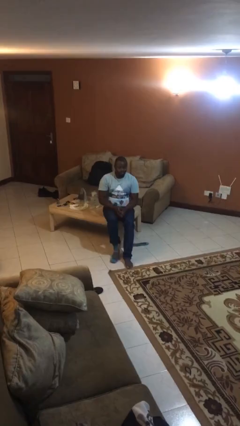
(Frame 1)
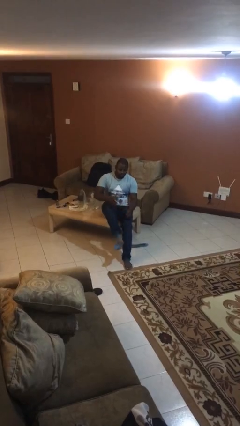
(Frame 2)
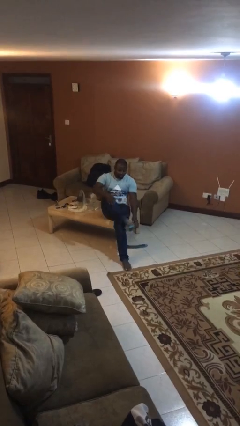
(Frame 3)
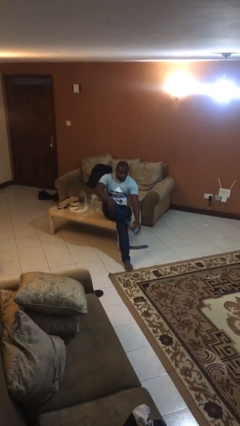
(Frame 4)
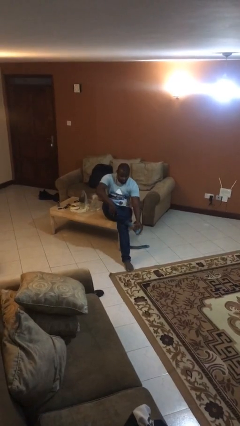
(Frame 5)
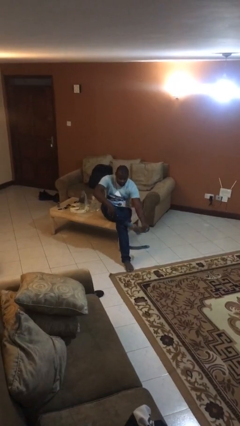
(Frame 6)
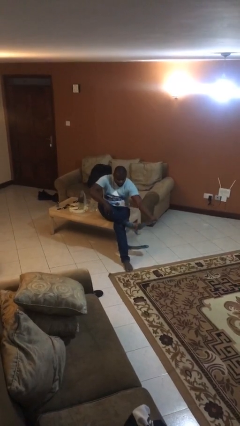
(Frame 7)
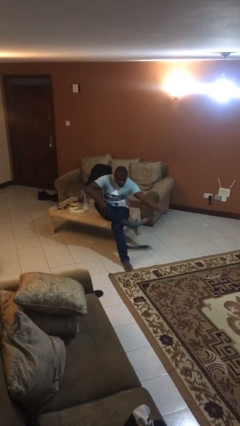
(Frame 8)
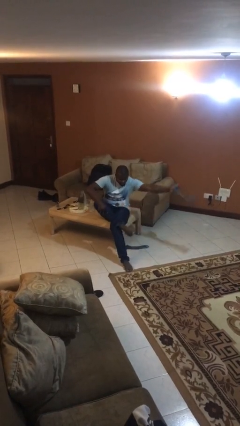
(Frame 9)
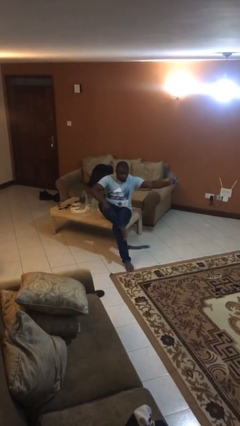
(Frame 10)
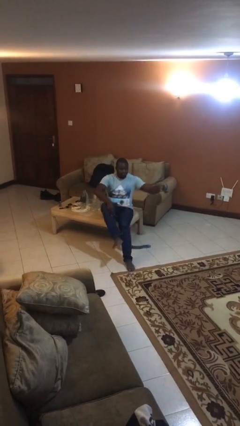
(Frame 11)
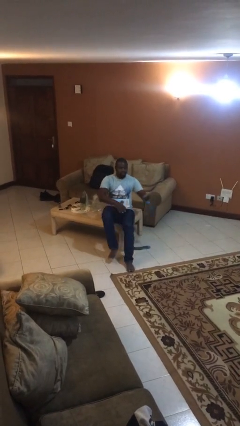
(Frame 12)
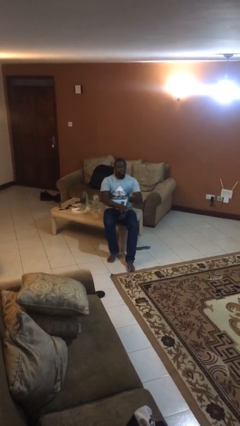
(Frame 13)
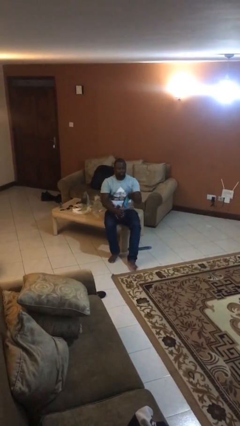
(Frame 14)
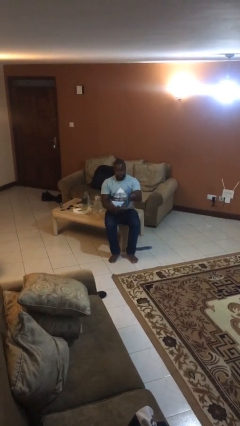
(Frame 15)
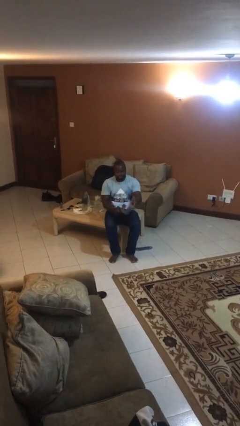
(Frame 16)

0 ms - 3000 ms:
person takes off socks

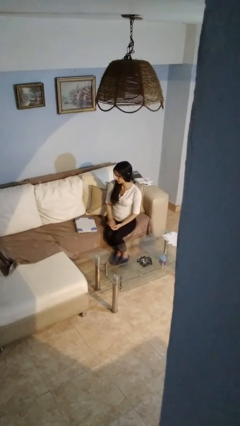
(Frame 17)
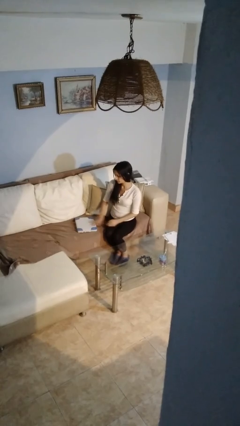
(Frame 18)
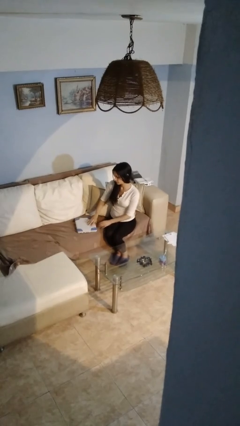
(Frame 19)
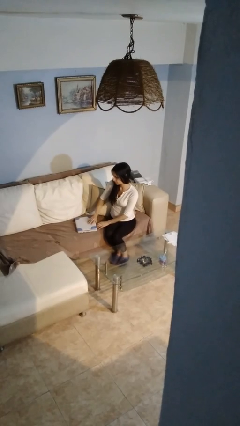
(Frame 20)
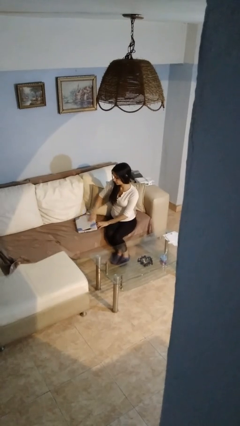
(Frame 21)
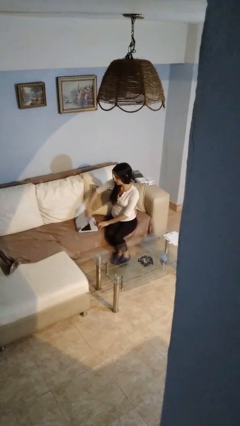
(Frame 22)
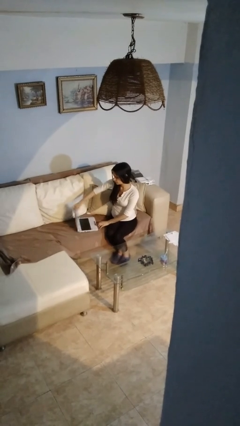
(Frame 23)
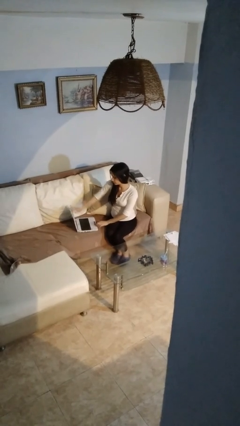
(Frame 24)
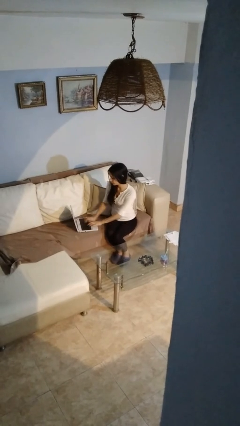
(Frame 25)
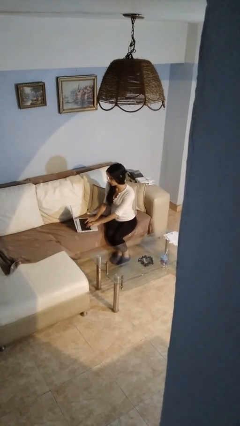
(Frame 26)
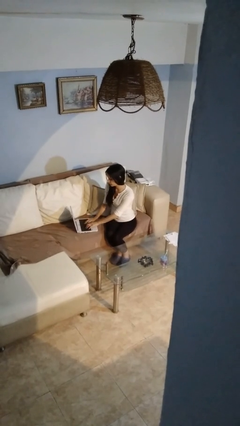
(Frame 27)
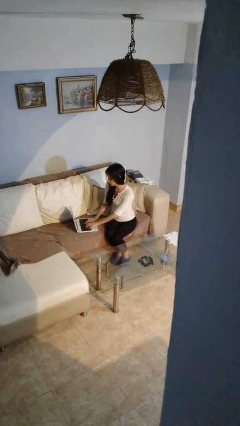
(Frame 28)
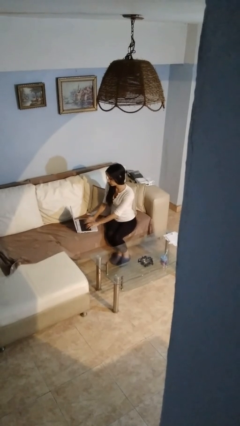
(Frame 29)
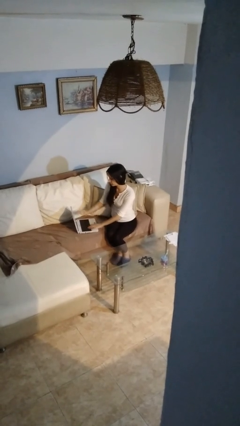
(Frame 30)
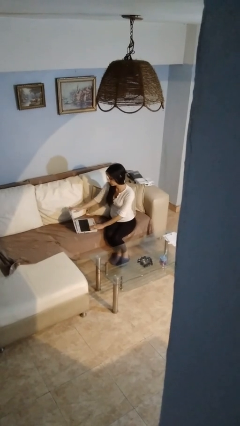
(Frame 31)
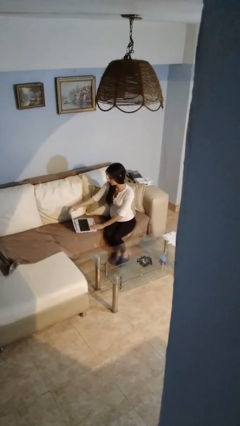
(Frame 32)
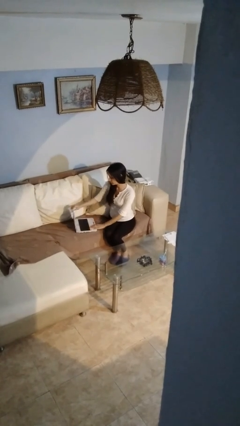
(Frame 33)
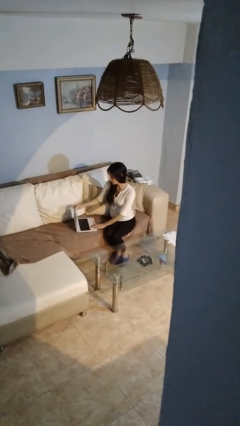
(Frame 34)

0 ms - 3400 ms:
person opens laptop

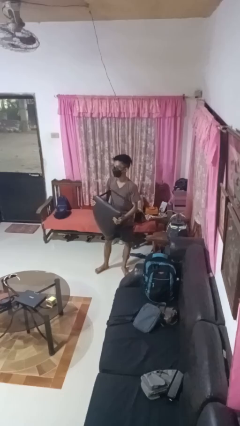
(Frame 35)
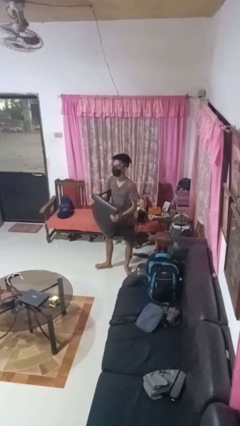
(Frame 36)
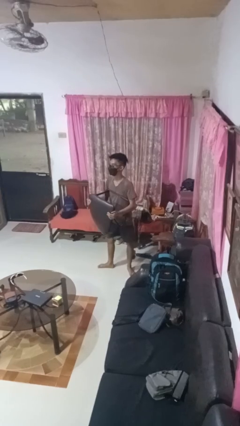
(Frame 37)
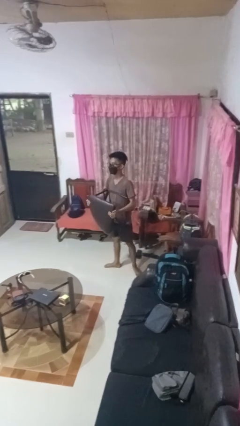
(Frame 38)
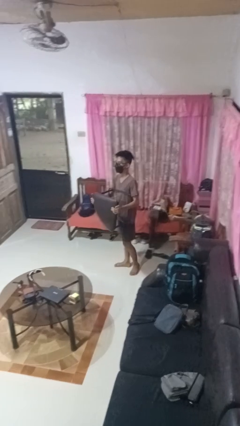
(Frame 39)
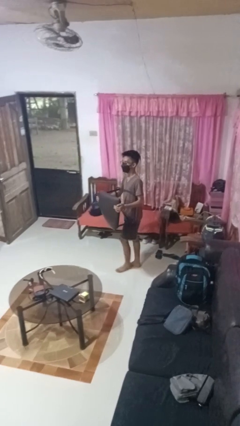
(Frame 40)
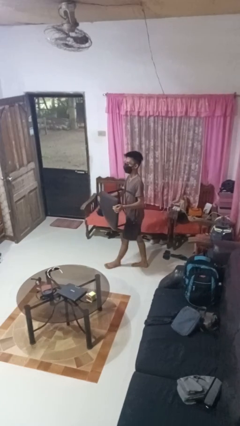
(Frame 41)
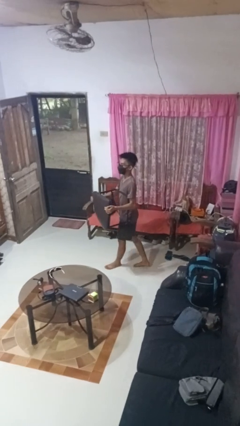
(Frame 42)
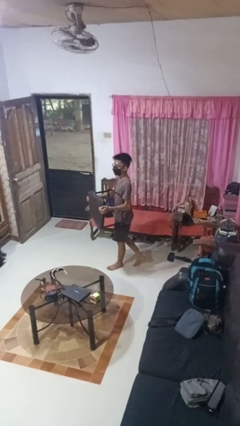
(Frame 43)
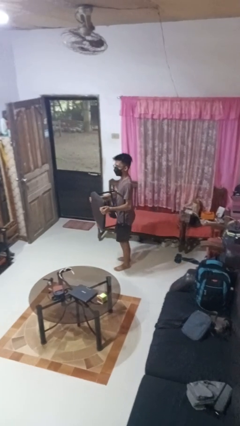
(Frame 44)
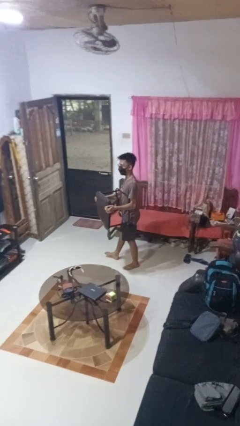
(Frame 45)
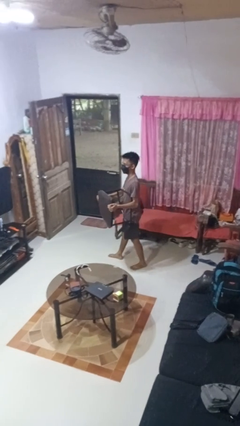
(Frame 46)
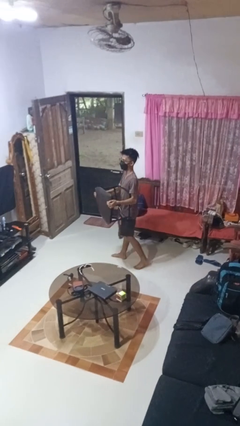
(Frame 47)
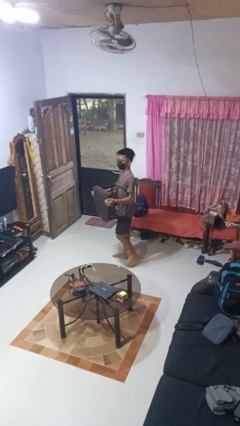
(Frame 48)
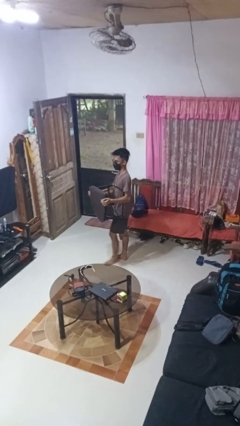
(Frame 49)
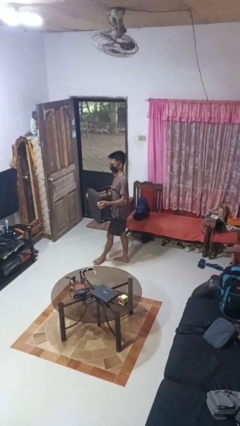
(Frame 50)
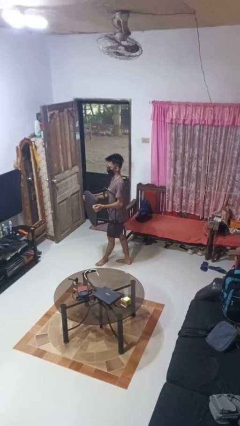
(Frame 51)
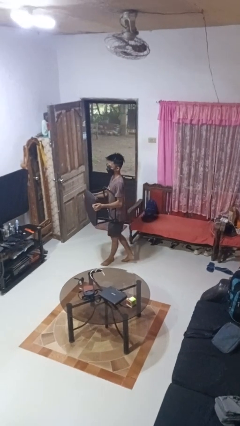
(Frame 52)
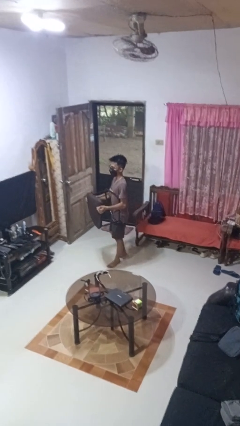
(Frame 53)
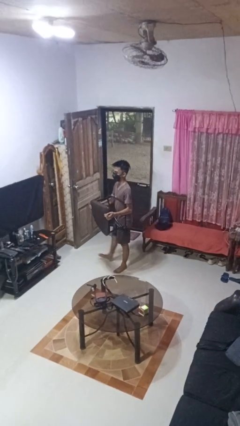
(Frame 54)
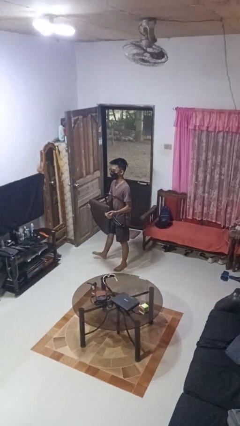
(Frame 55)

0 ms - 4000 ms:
person carries furniture

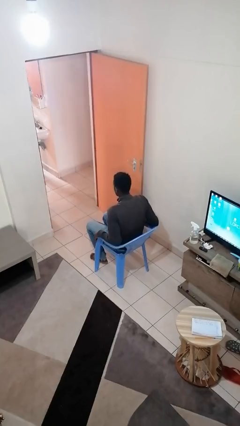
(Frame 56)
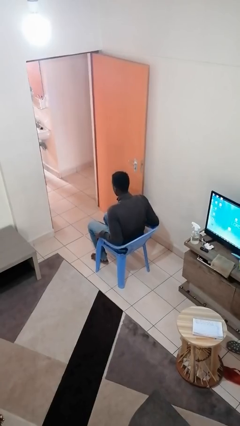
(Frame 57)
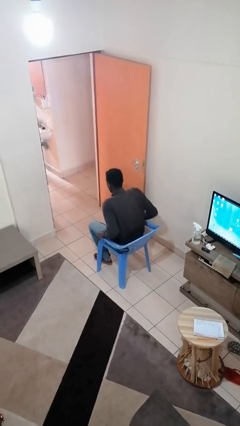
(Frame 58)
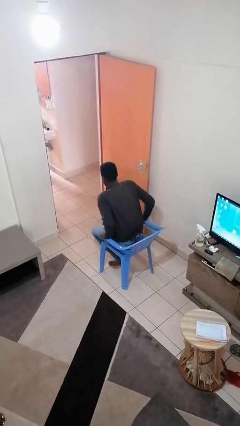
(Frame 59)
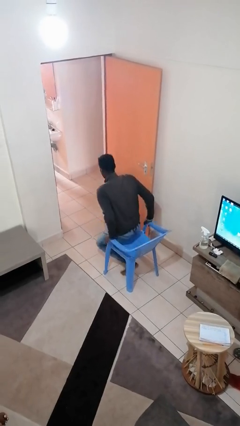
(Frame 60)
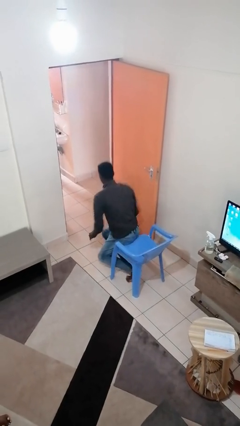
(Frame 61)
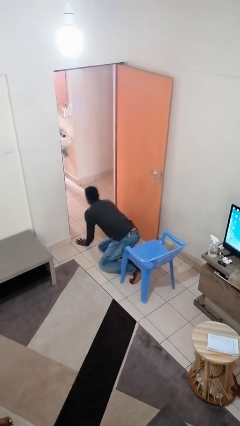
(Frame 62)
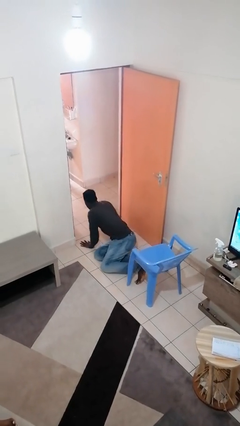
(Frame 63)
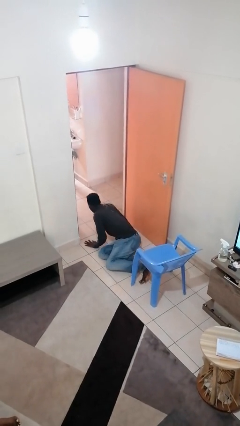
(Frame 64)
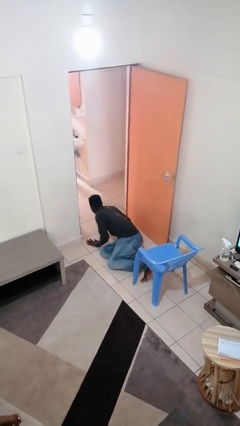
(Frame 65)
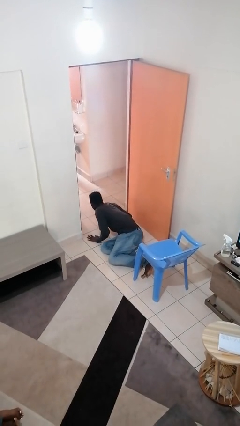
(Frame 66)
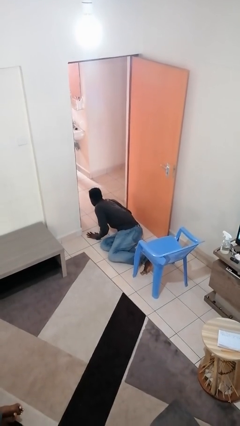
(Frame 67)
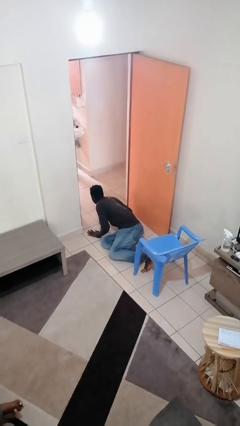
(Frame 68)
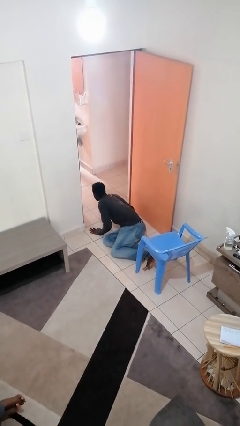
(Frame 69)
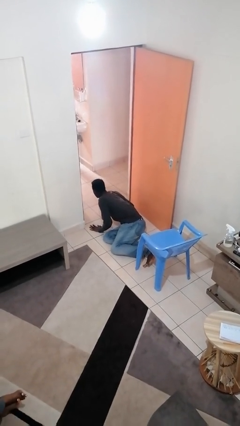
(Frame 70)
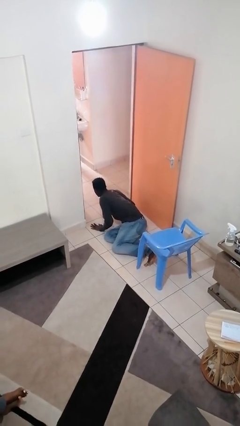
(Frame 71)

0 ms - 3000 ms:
person falls from chair

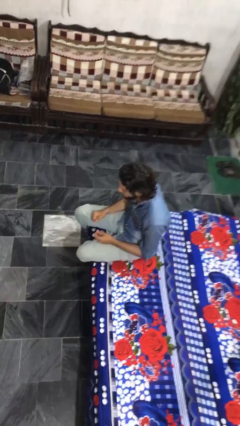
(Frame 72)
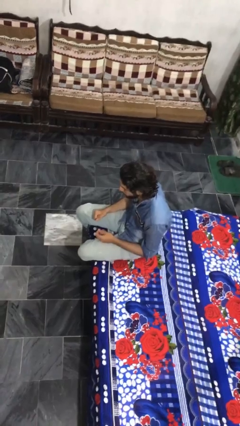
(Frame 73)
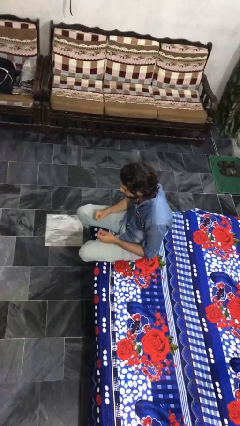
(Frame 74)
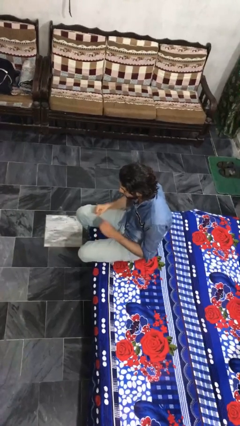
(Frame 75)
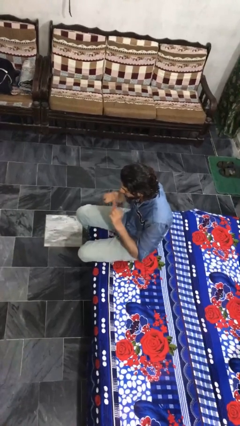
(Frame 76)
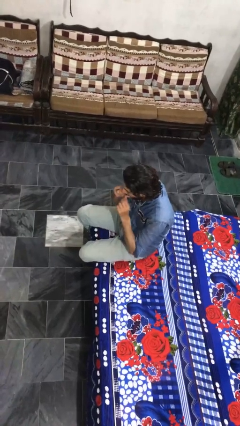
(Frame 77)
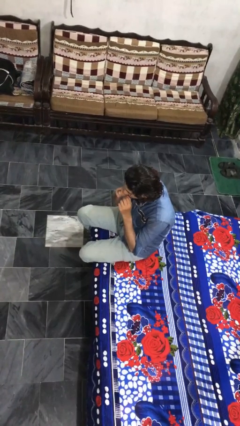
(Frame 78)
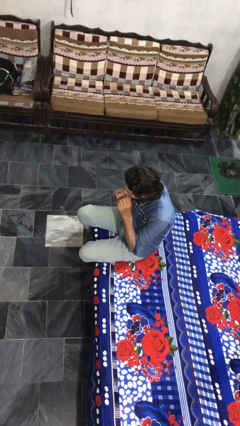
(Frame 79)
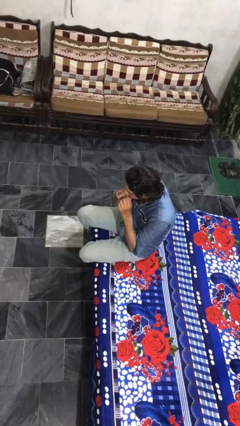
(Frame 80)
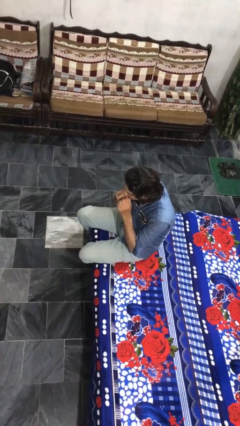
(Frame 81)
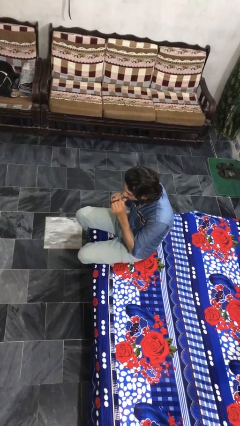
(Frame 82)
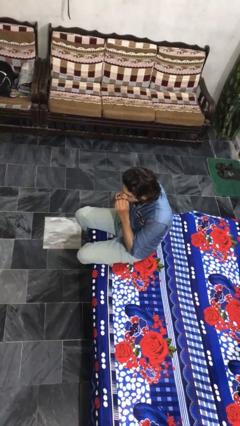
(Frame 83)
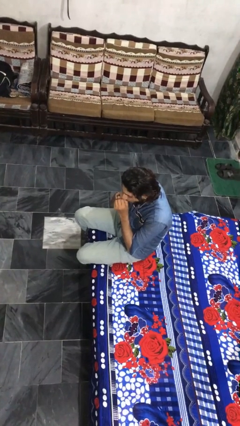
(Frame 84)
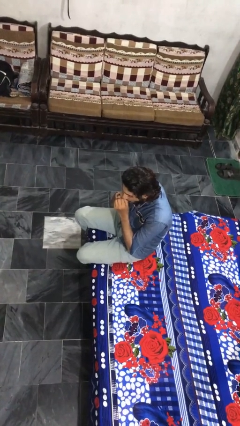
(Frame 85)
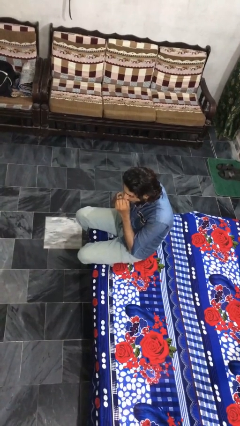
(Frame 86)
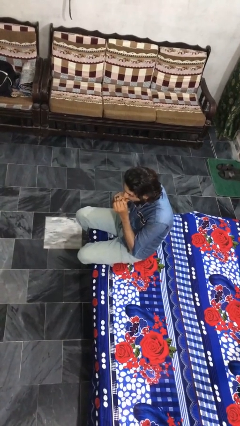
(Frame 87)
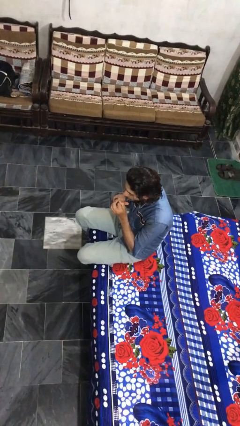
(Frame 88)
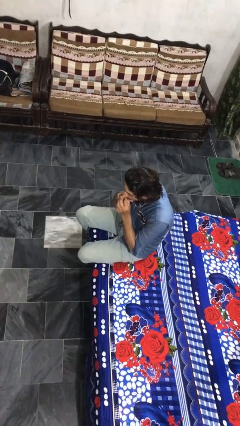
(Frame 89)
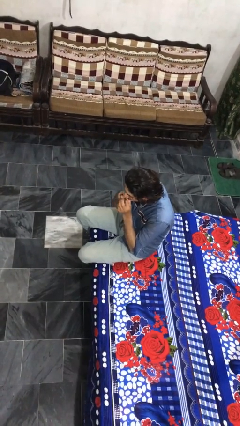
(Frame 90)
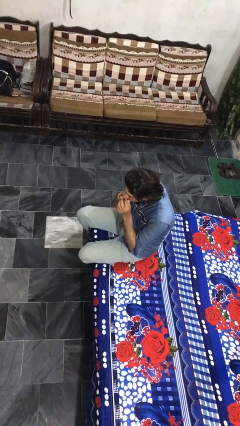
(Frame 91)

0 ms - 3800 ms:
person flosses

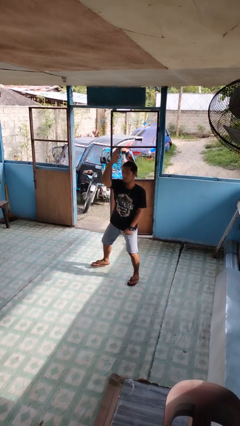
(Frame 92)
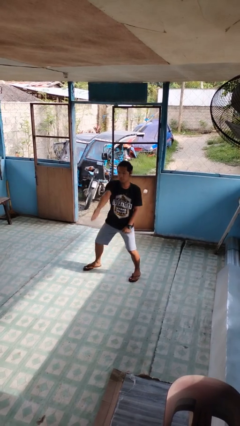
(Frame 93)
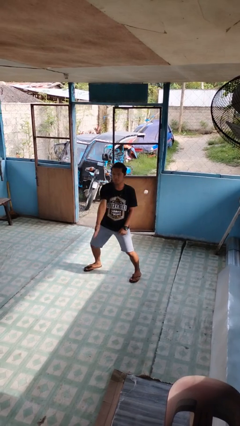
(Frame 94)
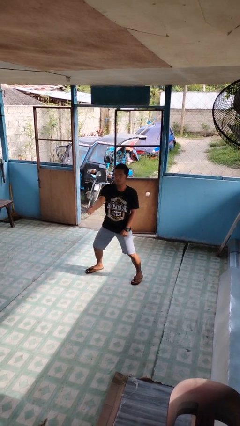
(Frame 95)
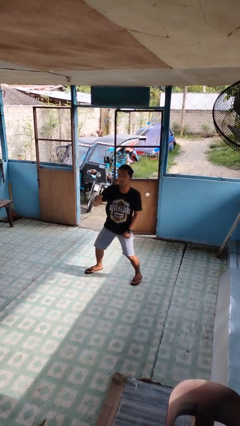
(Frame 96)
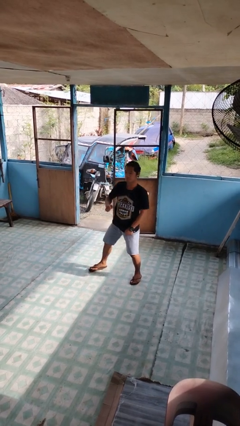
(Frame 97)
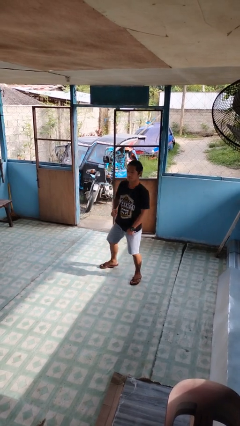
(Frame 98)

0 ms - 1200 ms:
person karate chop
